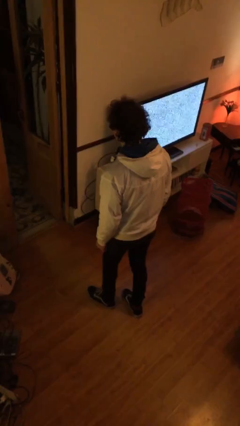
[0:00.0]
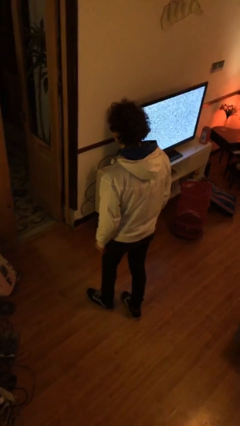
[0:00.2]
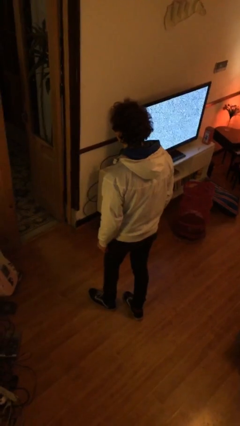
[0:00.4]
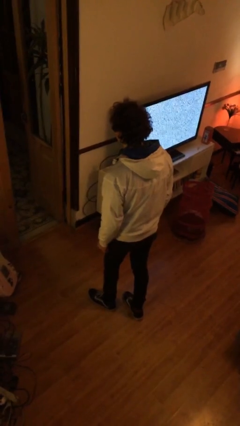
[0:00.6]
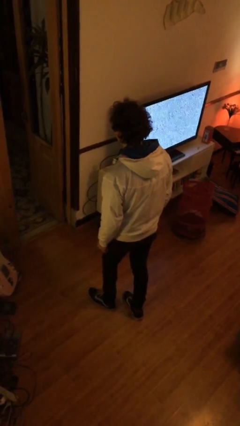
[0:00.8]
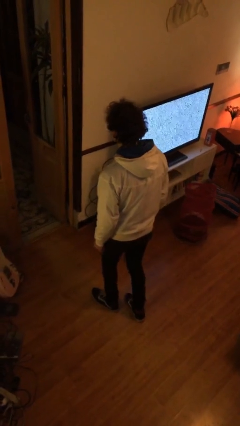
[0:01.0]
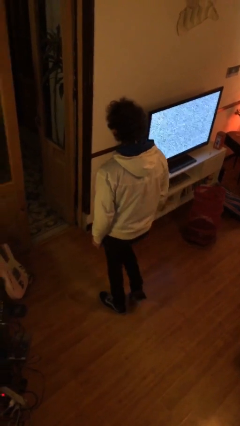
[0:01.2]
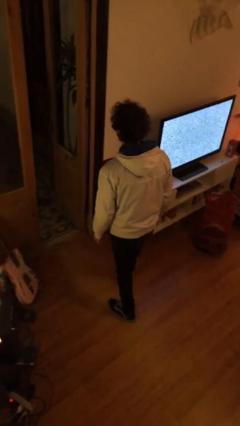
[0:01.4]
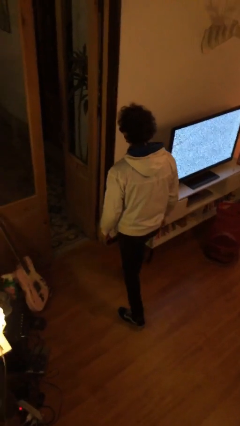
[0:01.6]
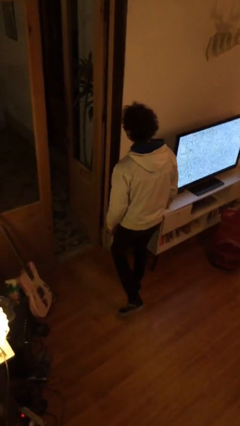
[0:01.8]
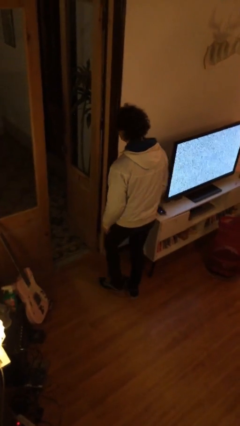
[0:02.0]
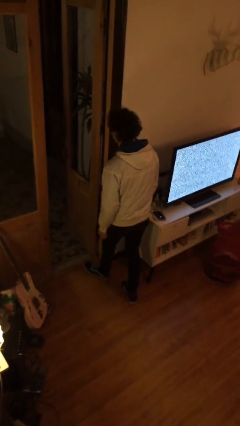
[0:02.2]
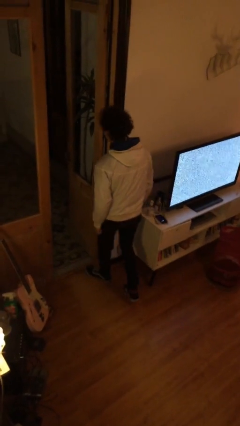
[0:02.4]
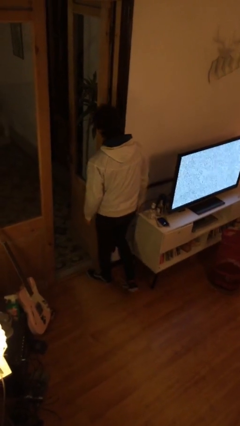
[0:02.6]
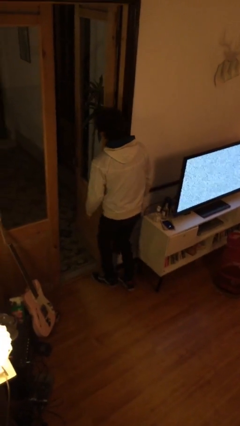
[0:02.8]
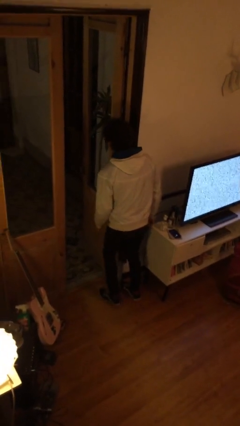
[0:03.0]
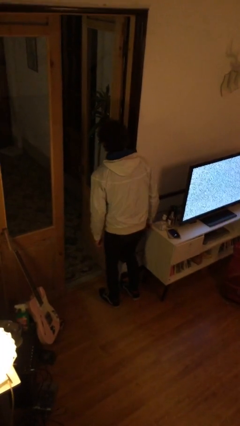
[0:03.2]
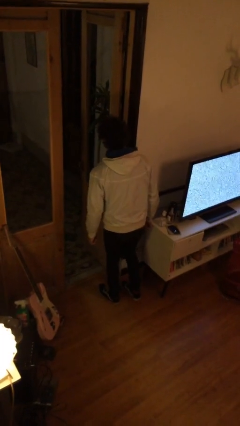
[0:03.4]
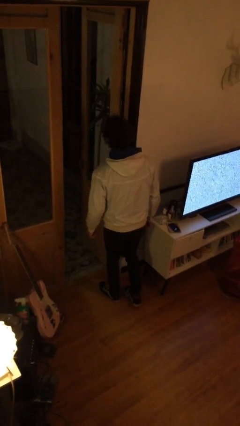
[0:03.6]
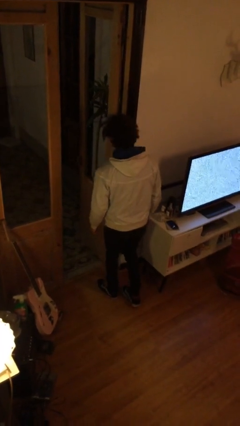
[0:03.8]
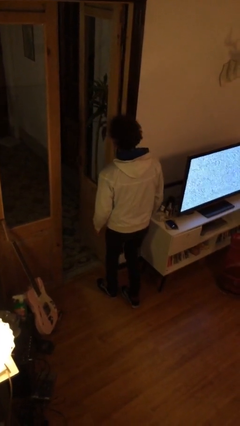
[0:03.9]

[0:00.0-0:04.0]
person bumps into wall

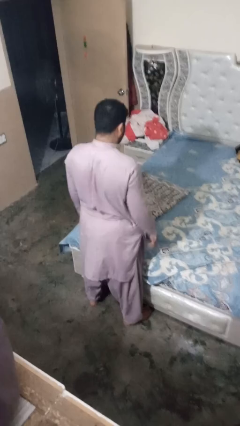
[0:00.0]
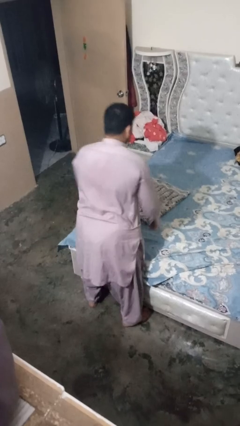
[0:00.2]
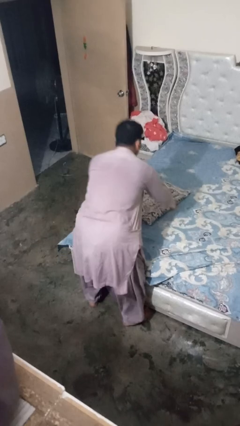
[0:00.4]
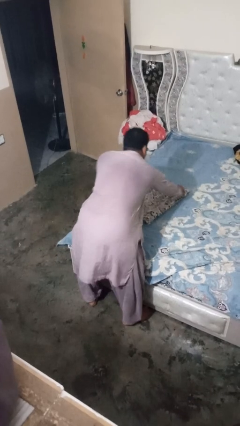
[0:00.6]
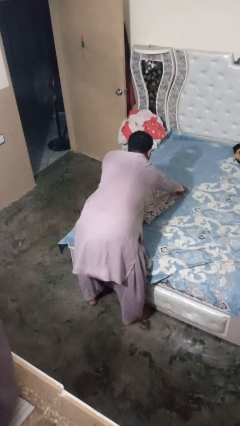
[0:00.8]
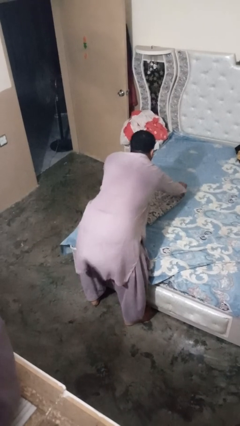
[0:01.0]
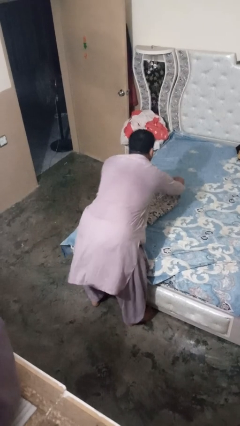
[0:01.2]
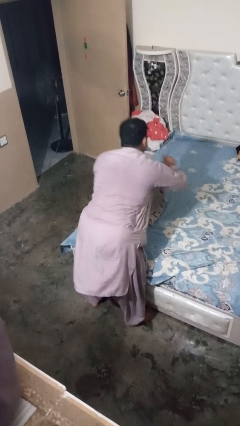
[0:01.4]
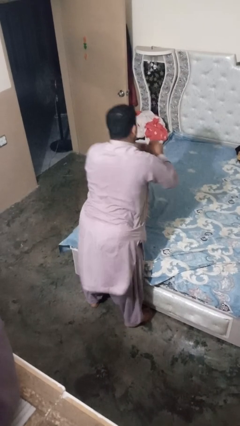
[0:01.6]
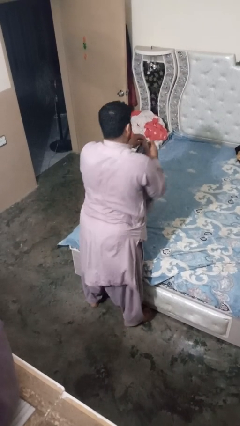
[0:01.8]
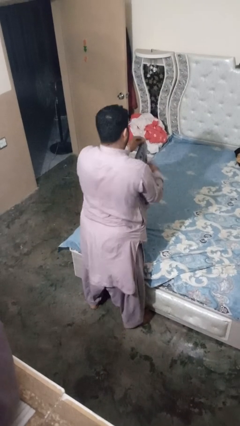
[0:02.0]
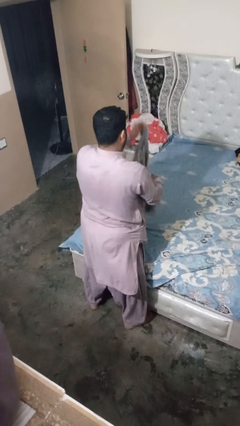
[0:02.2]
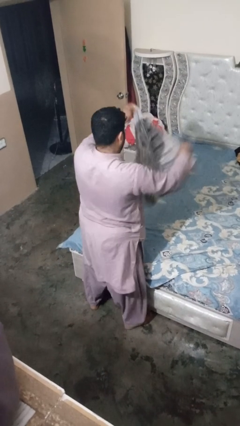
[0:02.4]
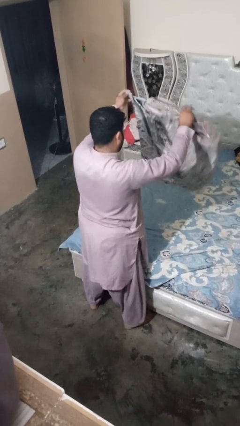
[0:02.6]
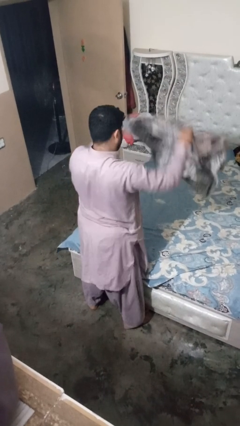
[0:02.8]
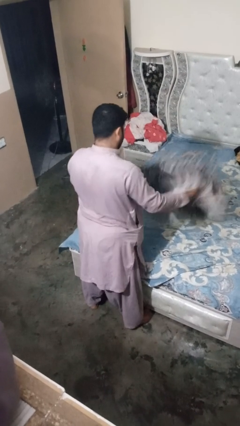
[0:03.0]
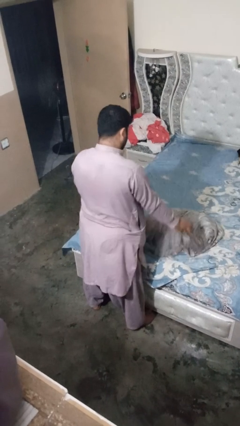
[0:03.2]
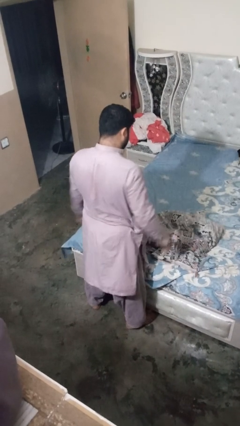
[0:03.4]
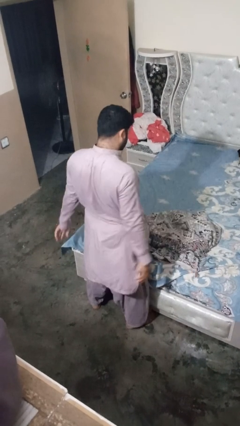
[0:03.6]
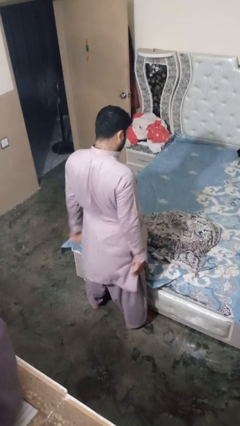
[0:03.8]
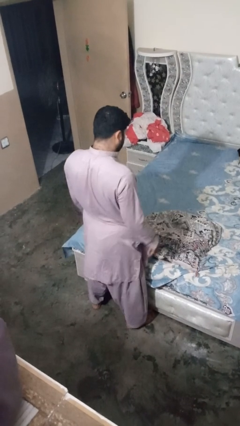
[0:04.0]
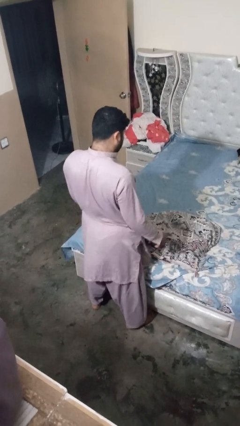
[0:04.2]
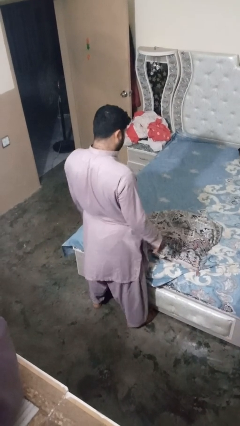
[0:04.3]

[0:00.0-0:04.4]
person unfolds blanket

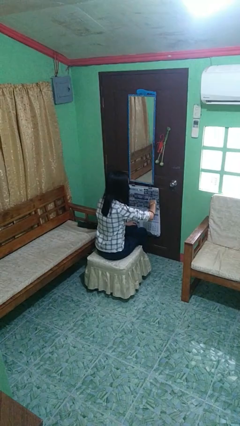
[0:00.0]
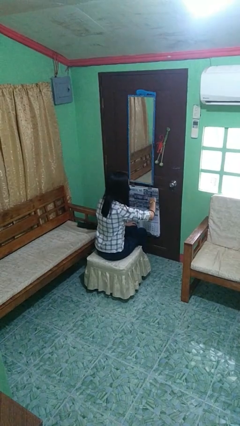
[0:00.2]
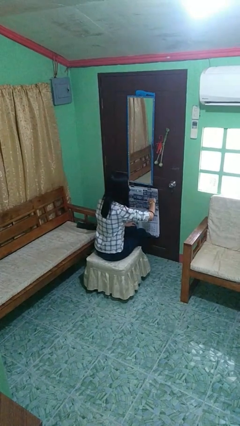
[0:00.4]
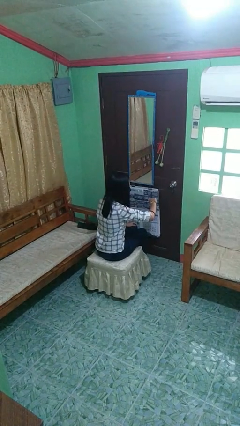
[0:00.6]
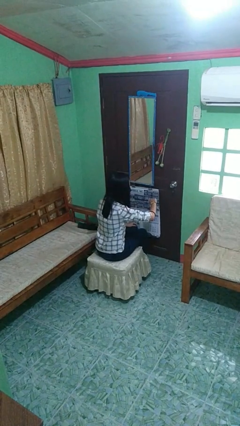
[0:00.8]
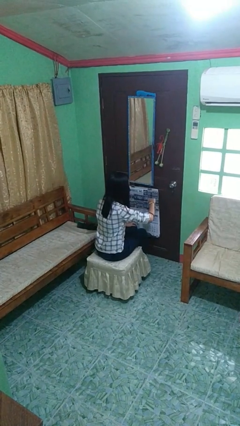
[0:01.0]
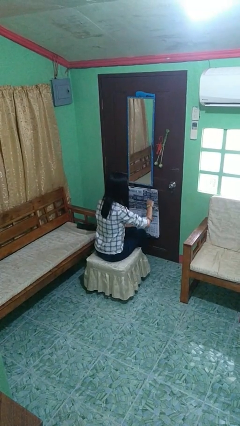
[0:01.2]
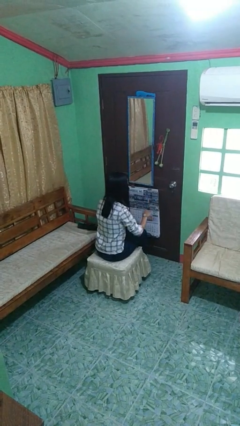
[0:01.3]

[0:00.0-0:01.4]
person looks at wristwatch

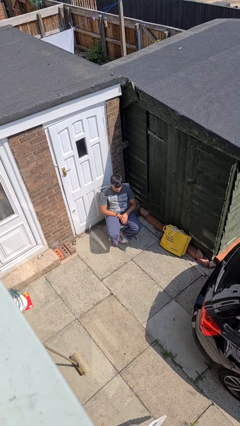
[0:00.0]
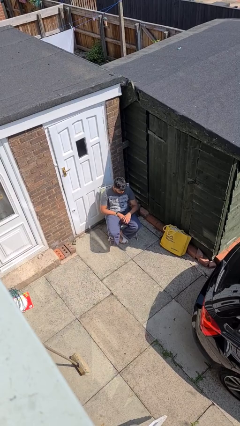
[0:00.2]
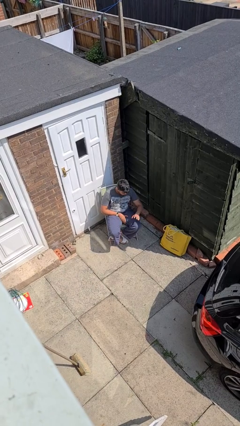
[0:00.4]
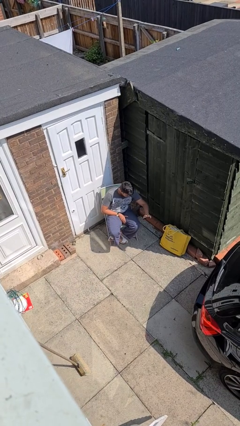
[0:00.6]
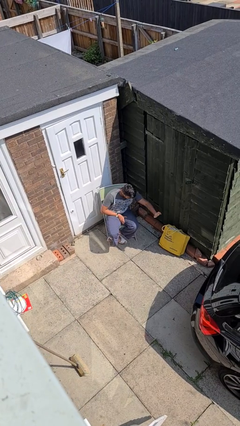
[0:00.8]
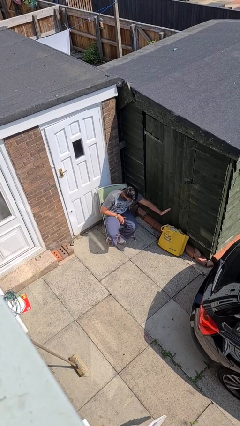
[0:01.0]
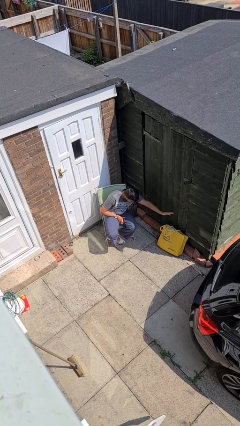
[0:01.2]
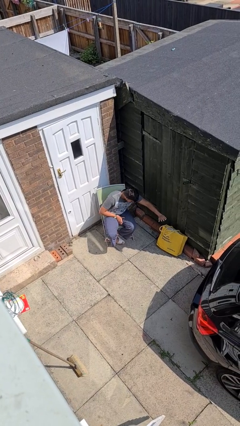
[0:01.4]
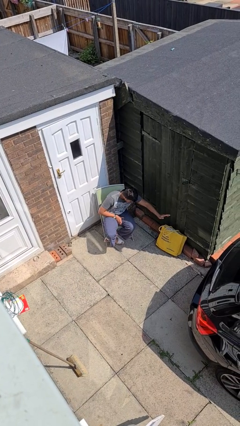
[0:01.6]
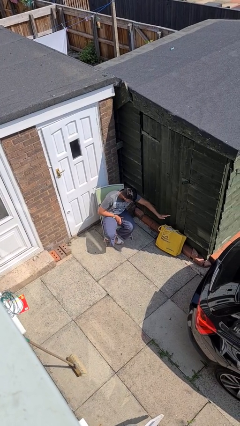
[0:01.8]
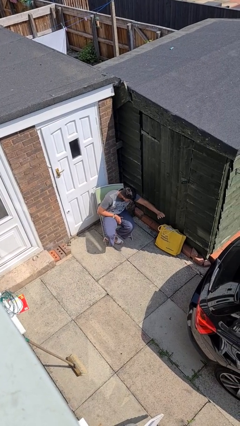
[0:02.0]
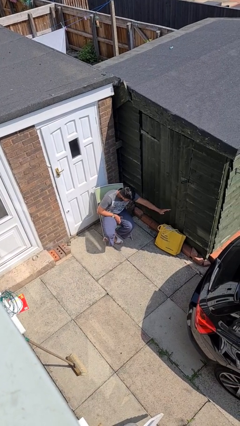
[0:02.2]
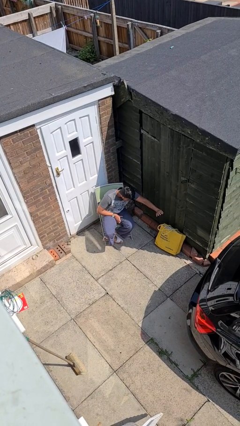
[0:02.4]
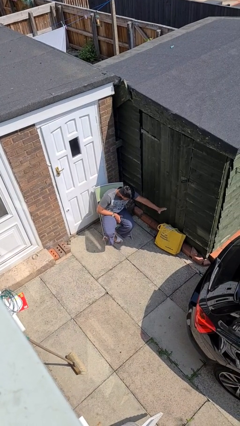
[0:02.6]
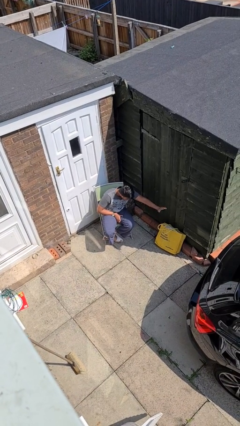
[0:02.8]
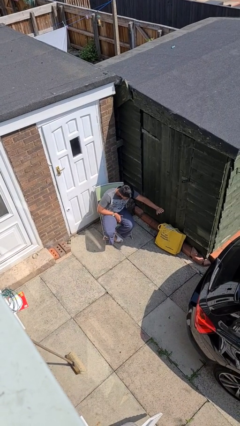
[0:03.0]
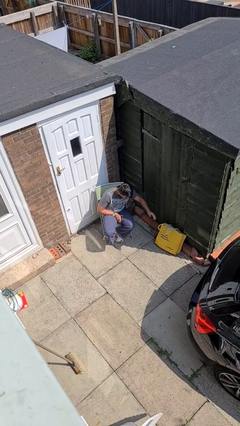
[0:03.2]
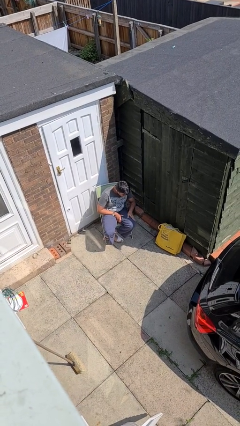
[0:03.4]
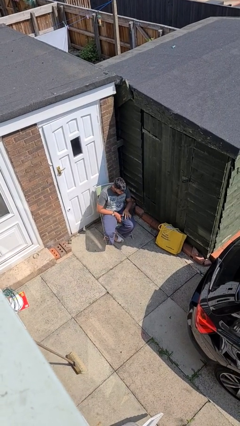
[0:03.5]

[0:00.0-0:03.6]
person waves hand over object

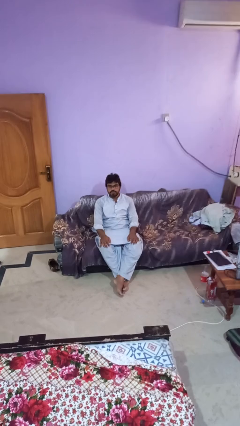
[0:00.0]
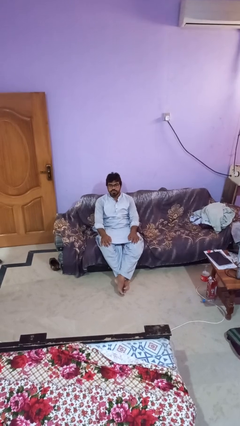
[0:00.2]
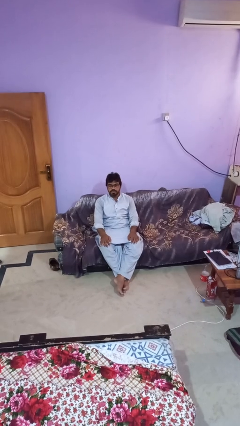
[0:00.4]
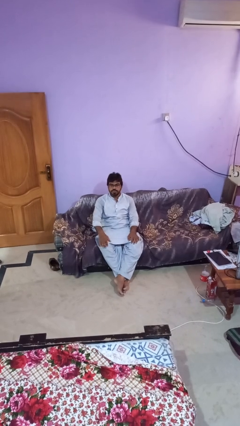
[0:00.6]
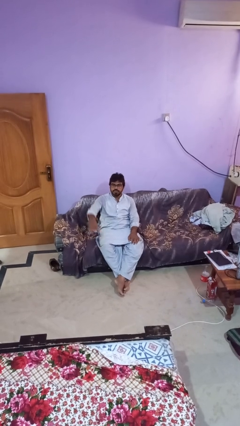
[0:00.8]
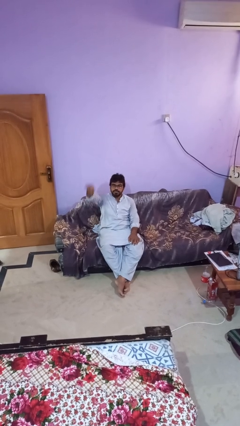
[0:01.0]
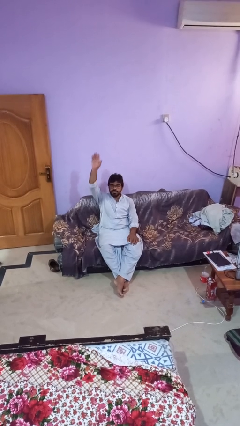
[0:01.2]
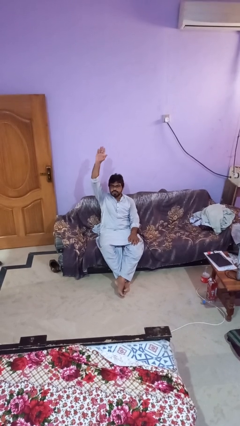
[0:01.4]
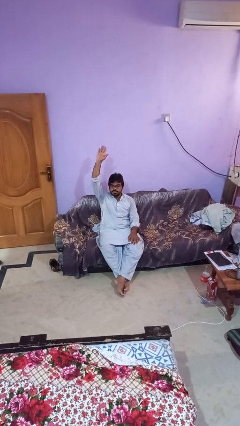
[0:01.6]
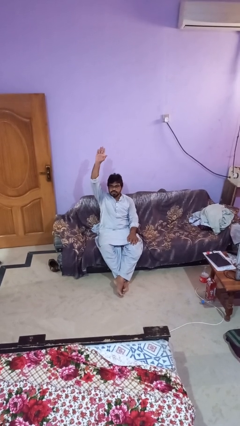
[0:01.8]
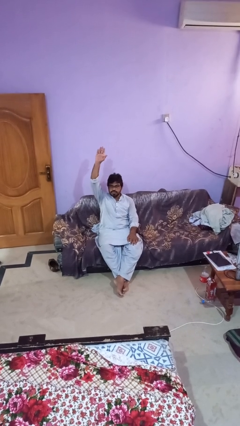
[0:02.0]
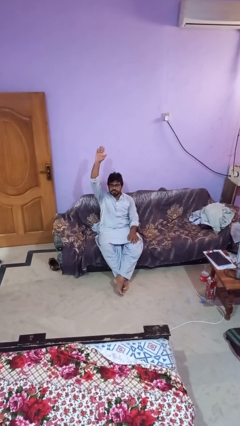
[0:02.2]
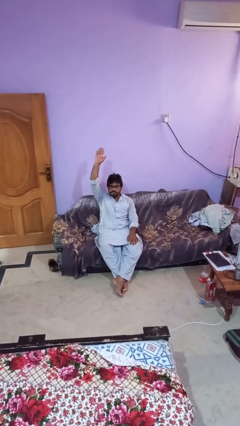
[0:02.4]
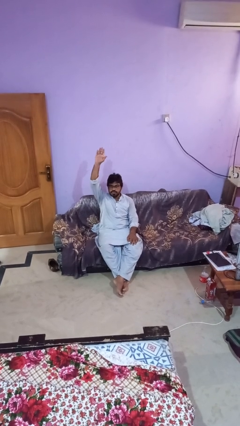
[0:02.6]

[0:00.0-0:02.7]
person gestures raise hand

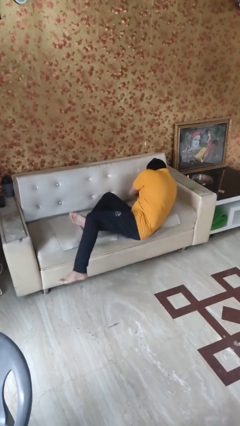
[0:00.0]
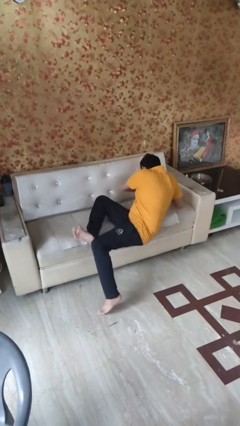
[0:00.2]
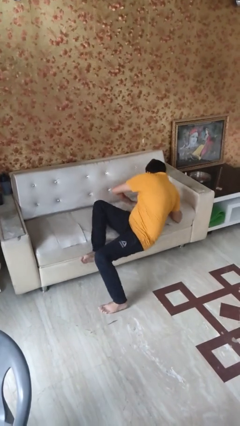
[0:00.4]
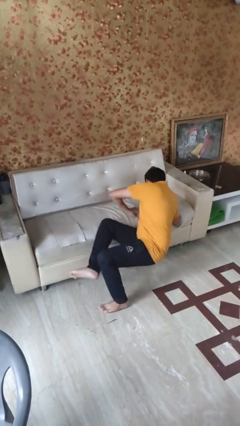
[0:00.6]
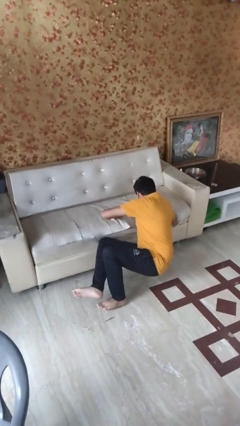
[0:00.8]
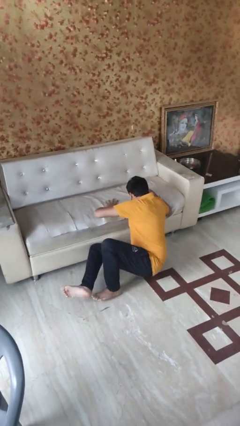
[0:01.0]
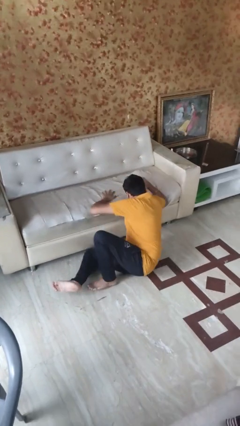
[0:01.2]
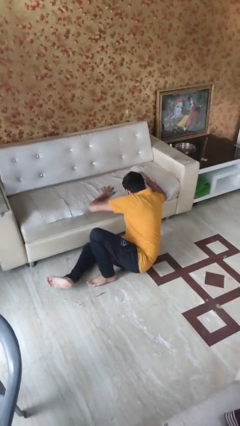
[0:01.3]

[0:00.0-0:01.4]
person falls from bed
